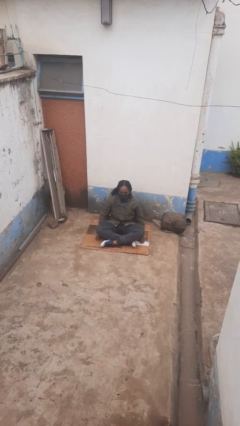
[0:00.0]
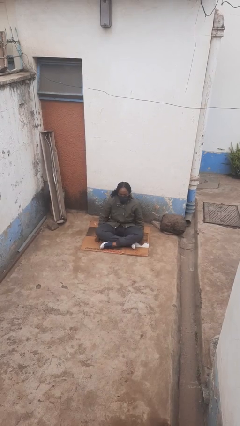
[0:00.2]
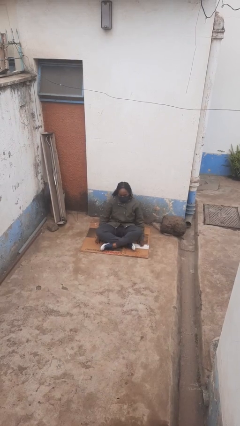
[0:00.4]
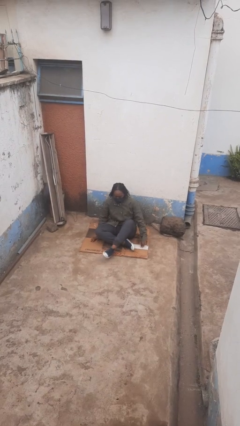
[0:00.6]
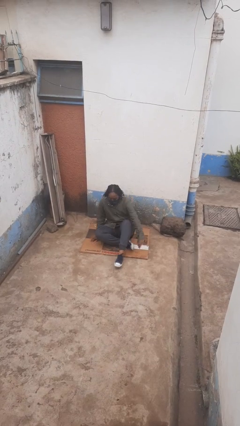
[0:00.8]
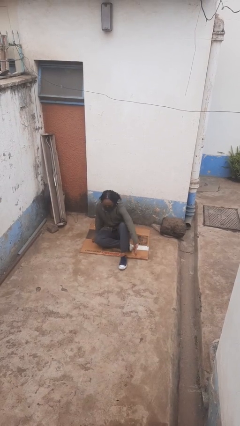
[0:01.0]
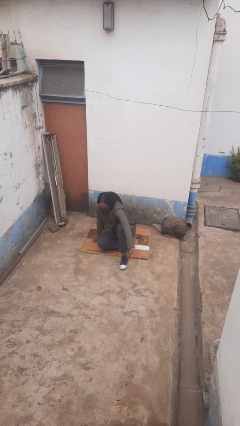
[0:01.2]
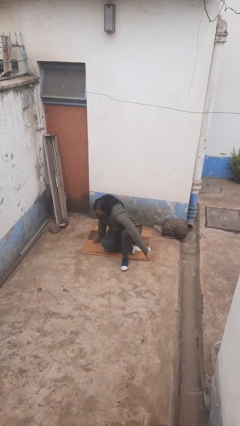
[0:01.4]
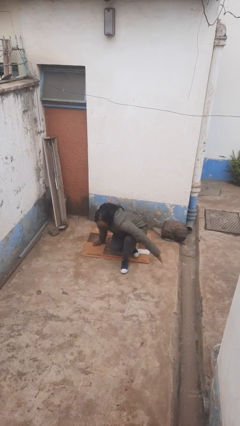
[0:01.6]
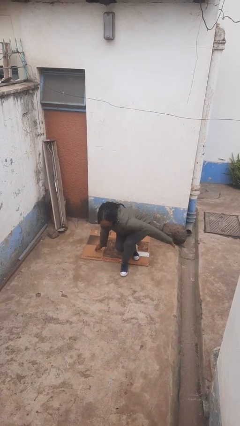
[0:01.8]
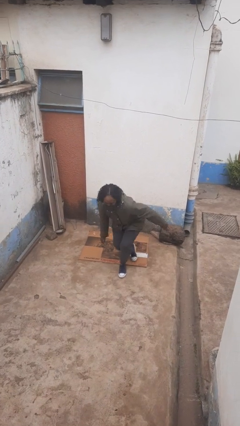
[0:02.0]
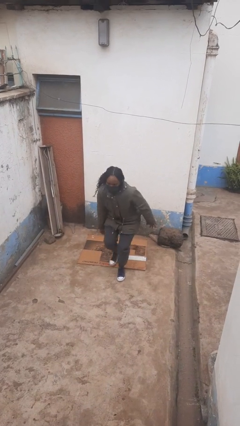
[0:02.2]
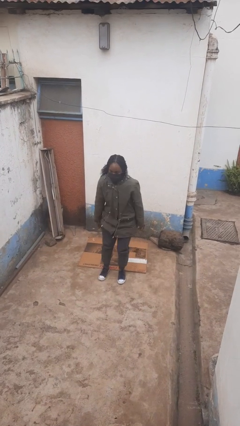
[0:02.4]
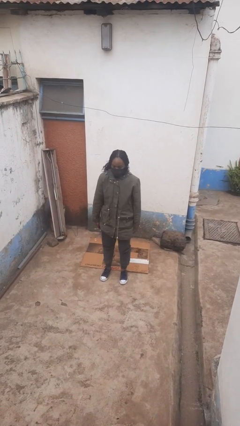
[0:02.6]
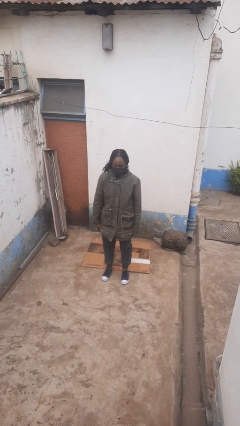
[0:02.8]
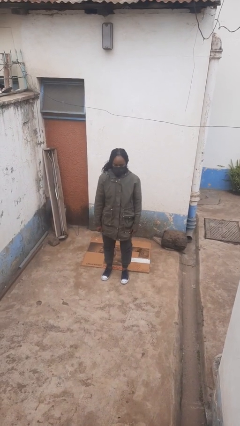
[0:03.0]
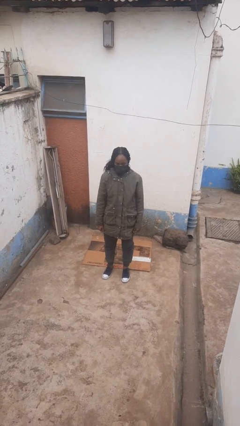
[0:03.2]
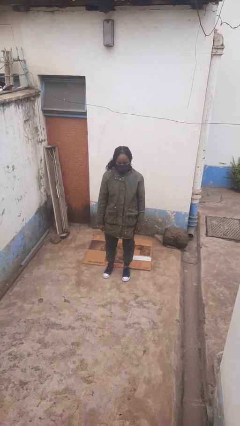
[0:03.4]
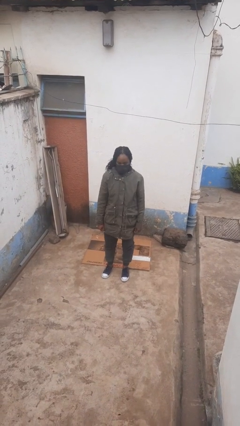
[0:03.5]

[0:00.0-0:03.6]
person stands up from floor

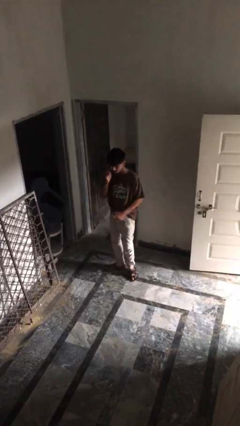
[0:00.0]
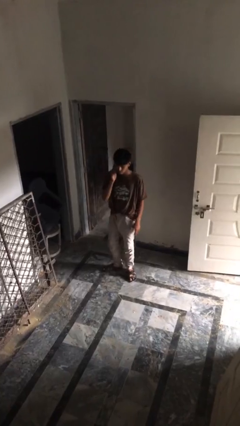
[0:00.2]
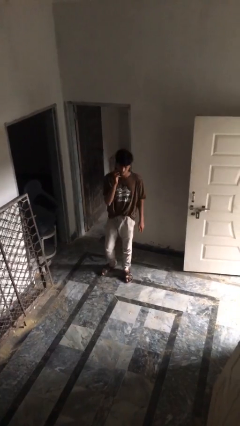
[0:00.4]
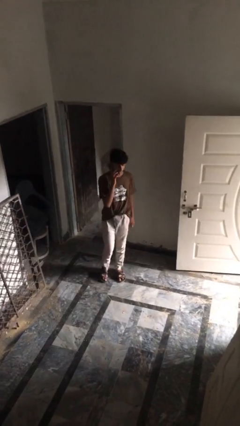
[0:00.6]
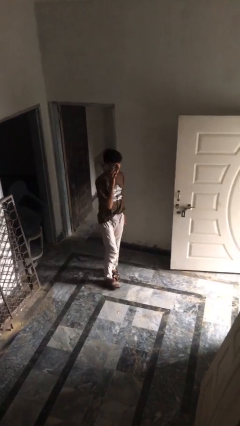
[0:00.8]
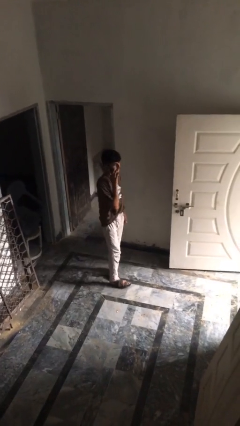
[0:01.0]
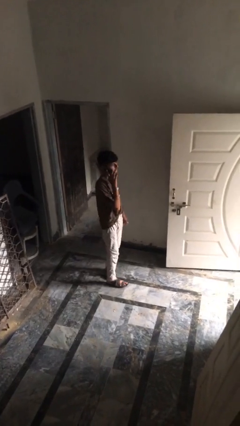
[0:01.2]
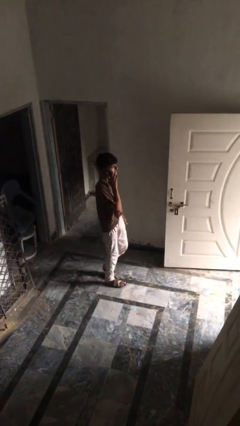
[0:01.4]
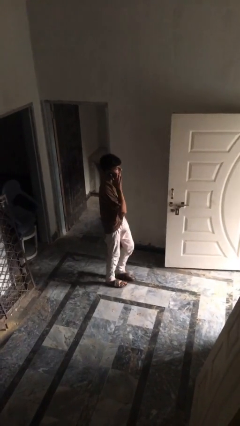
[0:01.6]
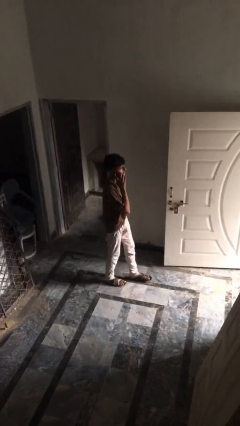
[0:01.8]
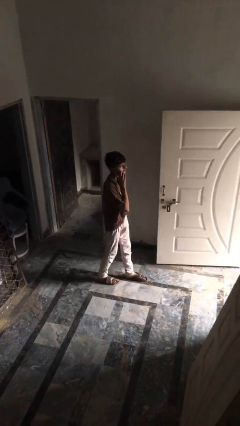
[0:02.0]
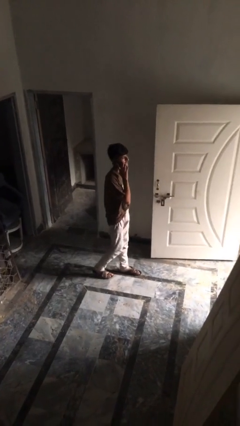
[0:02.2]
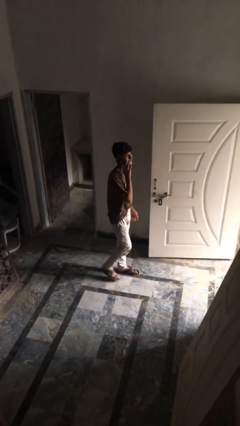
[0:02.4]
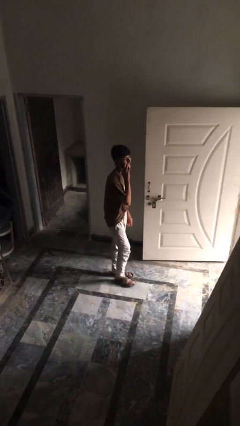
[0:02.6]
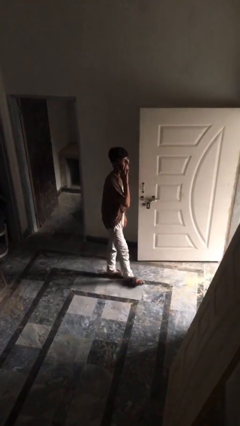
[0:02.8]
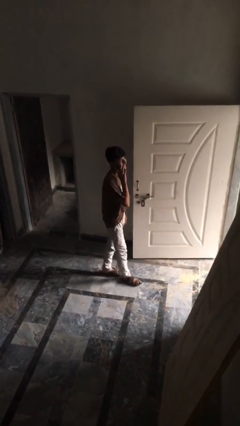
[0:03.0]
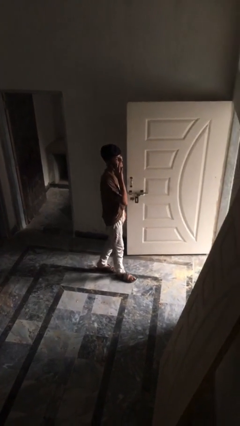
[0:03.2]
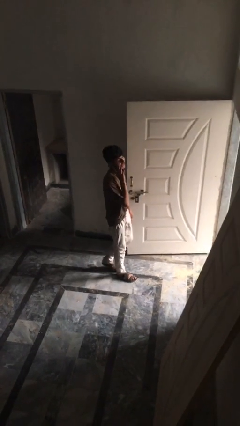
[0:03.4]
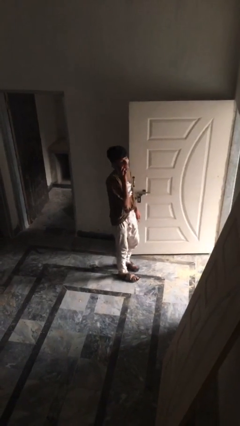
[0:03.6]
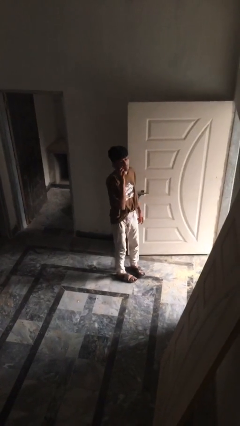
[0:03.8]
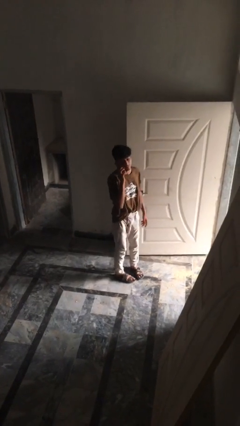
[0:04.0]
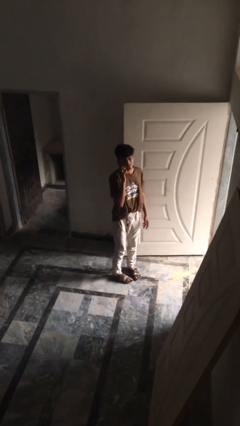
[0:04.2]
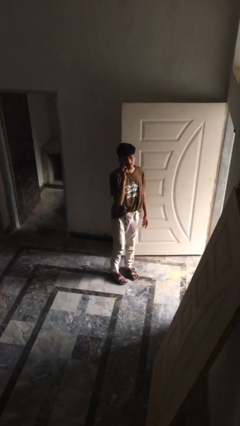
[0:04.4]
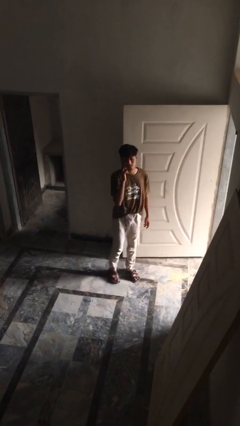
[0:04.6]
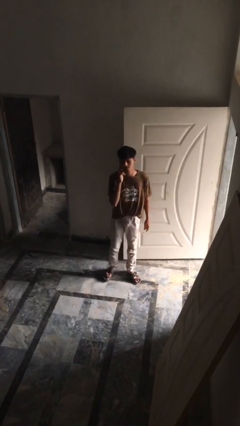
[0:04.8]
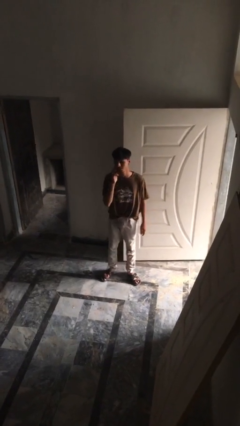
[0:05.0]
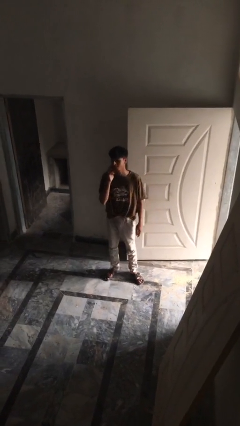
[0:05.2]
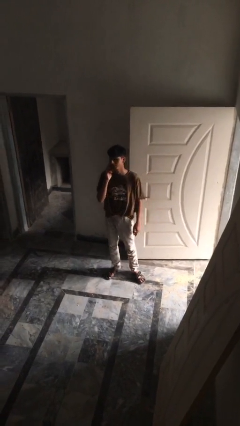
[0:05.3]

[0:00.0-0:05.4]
person talks on phone

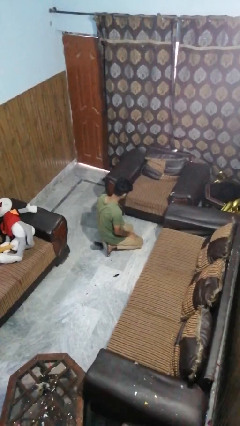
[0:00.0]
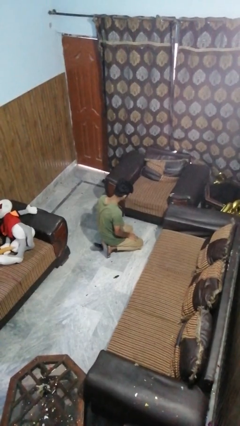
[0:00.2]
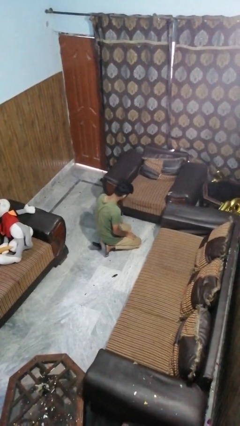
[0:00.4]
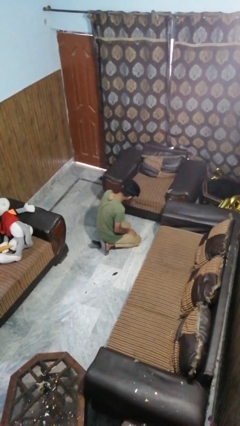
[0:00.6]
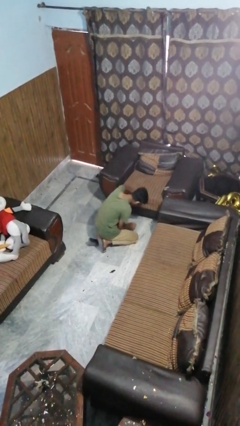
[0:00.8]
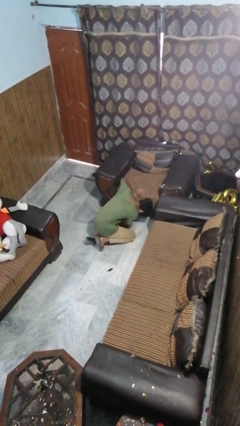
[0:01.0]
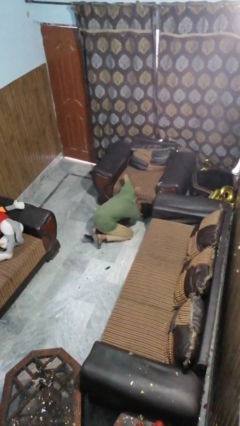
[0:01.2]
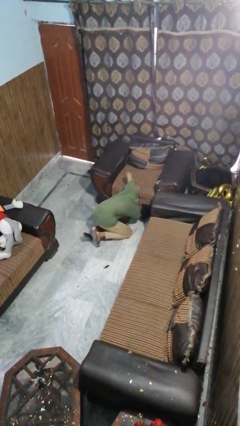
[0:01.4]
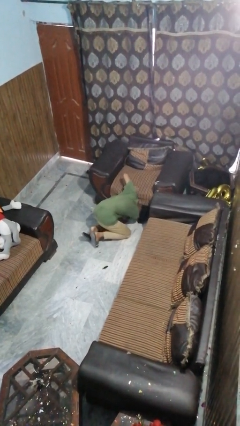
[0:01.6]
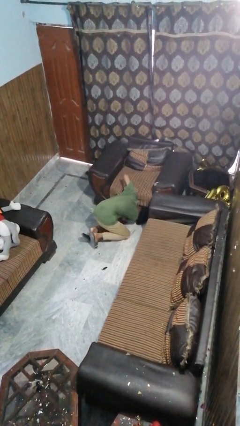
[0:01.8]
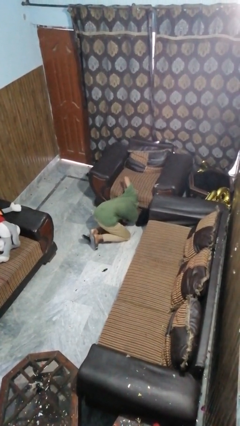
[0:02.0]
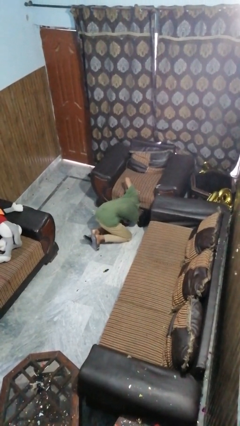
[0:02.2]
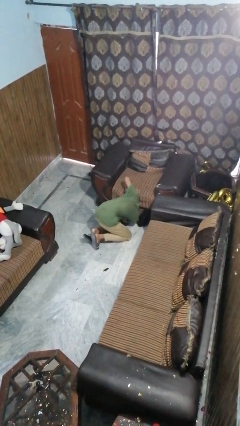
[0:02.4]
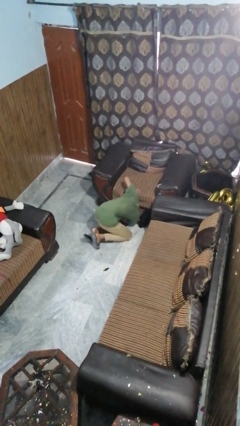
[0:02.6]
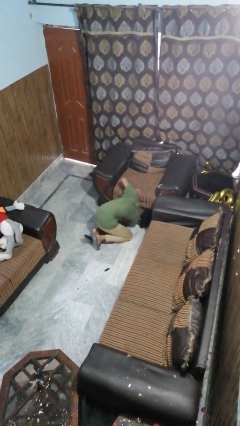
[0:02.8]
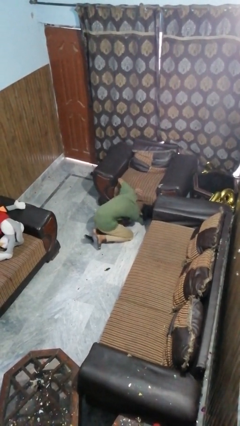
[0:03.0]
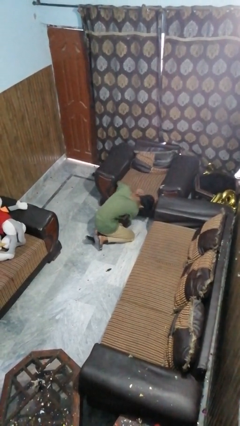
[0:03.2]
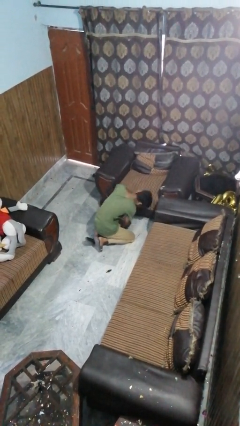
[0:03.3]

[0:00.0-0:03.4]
person searches under couch

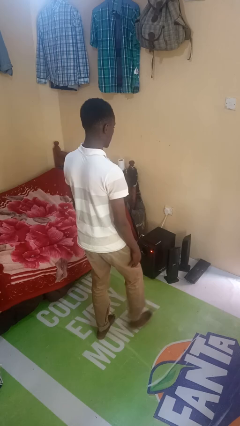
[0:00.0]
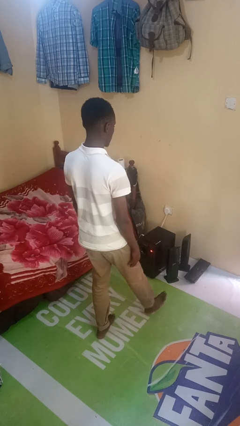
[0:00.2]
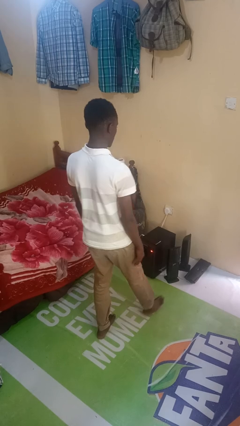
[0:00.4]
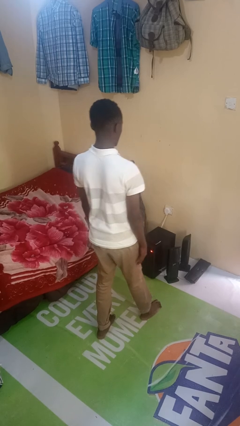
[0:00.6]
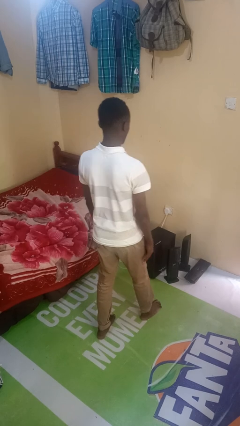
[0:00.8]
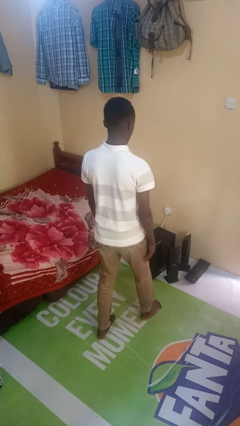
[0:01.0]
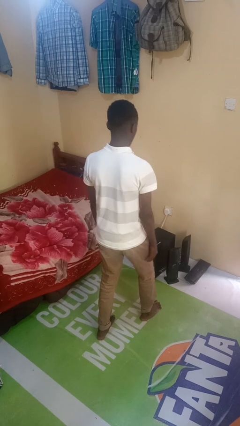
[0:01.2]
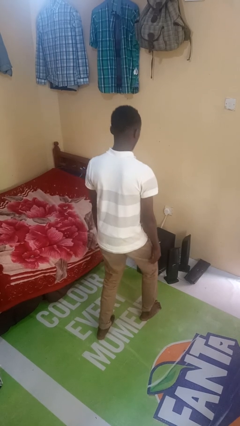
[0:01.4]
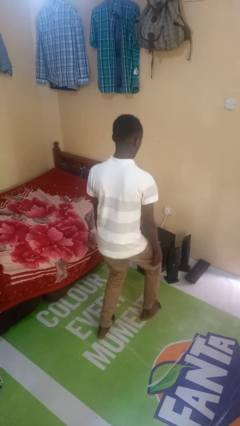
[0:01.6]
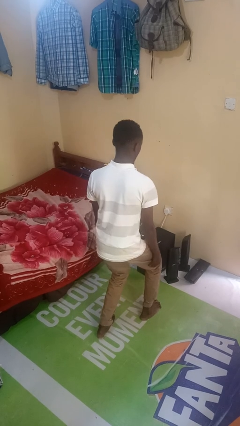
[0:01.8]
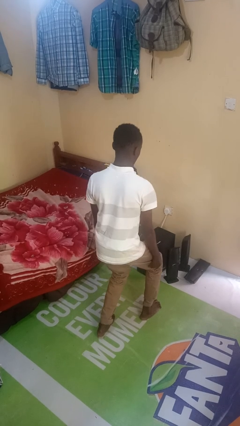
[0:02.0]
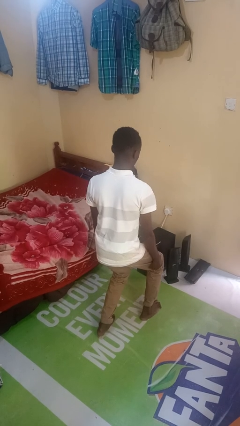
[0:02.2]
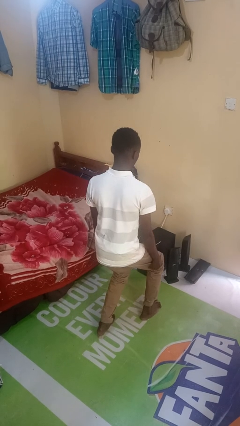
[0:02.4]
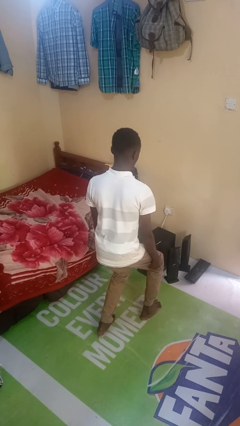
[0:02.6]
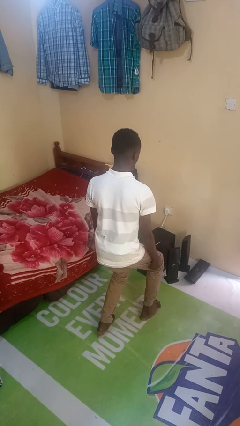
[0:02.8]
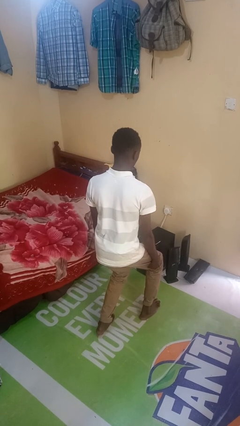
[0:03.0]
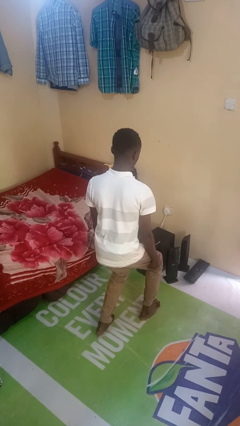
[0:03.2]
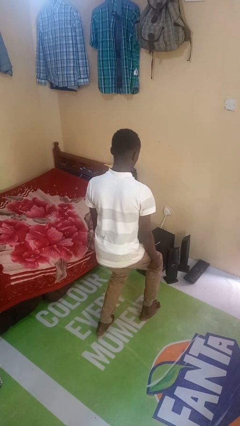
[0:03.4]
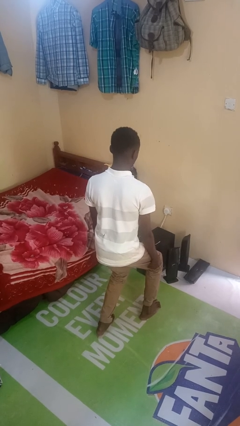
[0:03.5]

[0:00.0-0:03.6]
person exercises with lunges

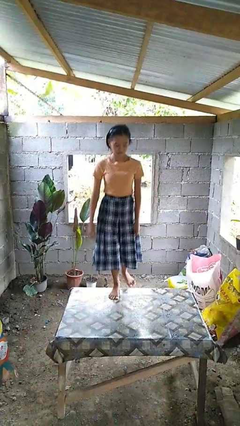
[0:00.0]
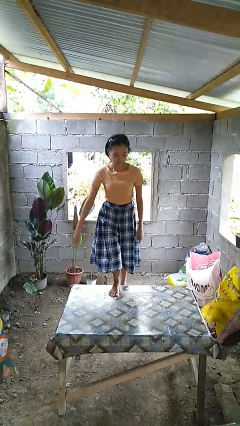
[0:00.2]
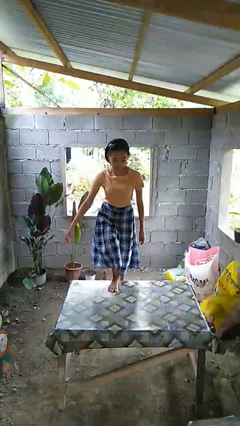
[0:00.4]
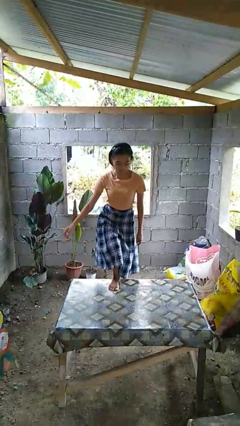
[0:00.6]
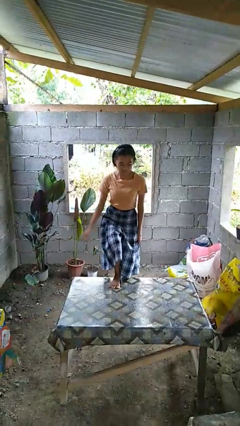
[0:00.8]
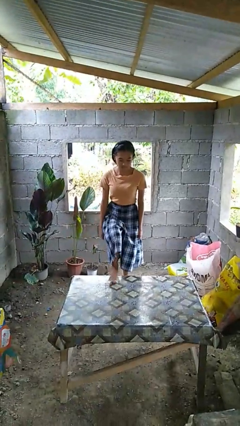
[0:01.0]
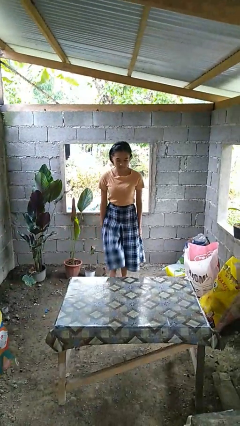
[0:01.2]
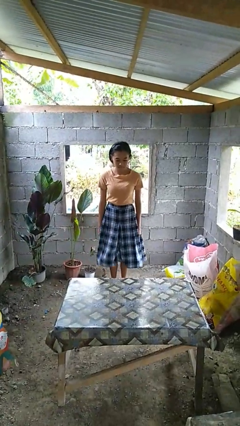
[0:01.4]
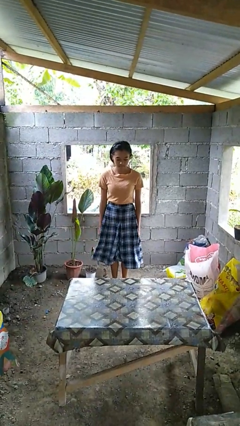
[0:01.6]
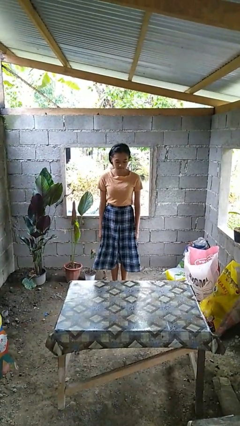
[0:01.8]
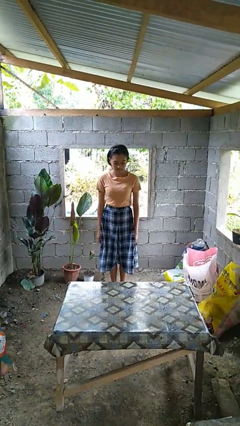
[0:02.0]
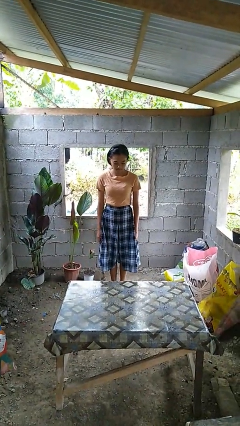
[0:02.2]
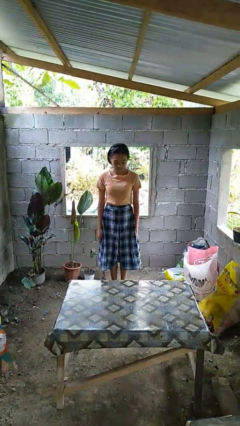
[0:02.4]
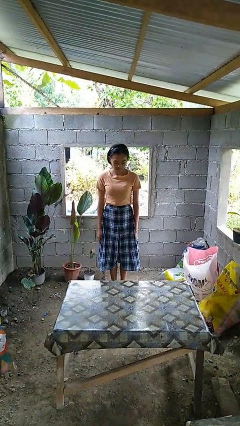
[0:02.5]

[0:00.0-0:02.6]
person climbs off table
